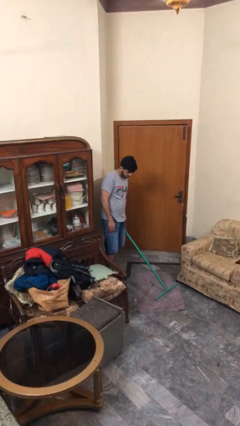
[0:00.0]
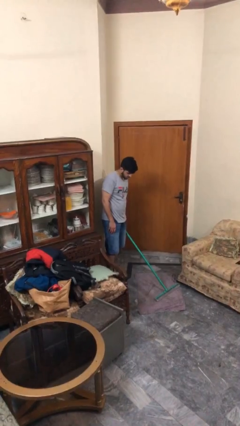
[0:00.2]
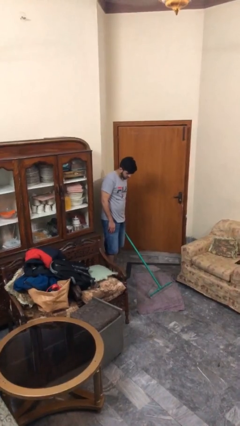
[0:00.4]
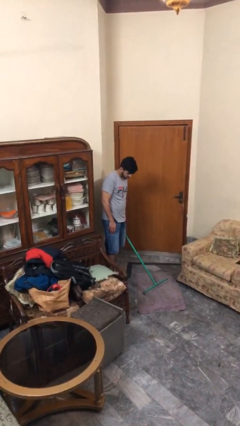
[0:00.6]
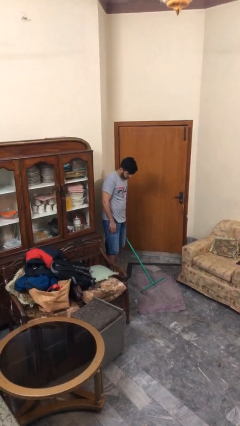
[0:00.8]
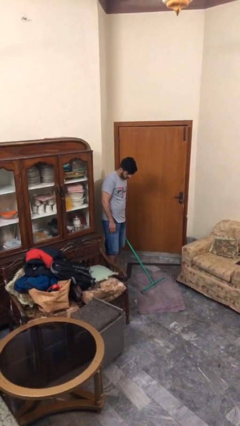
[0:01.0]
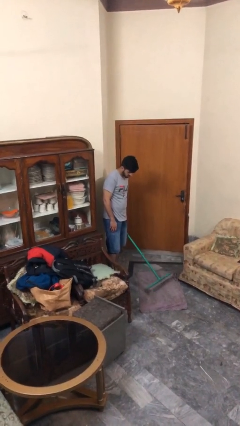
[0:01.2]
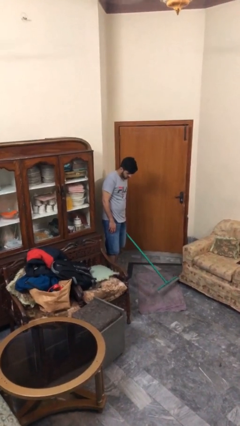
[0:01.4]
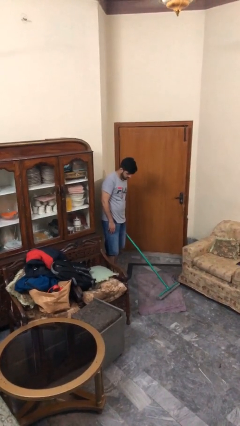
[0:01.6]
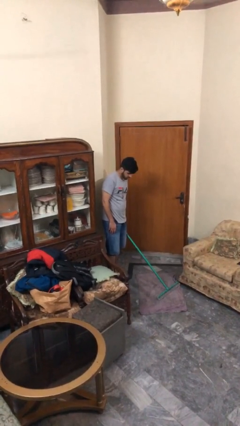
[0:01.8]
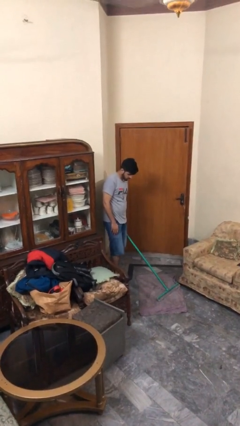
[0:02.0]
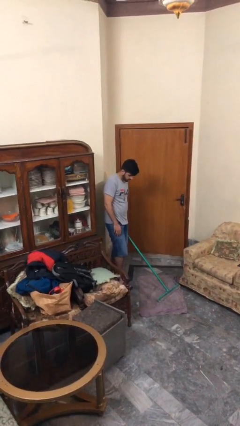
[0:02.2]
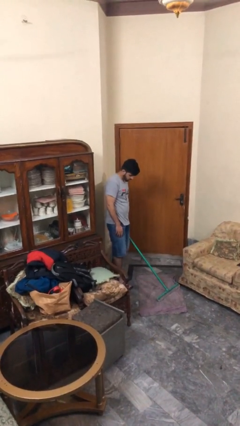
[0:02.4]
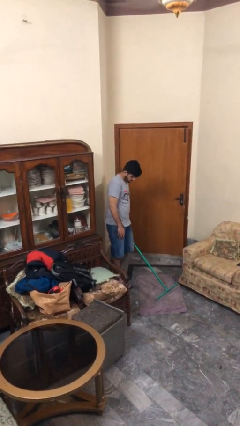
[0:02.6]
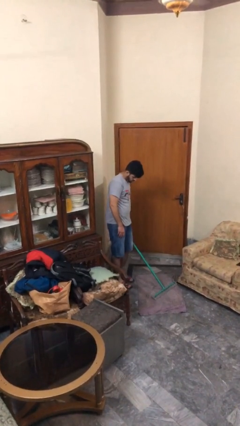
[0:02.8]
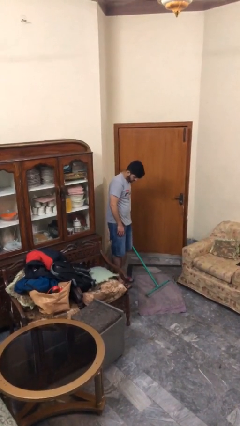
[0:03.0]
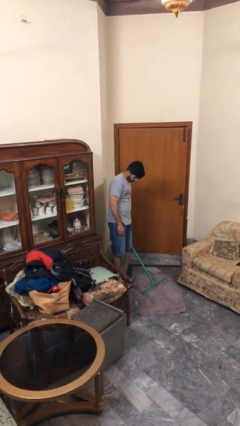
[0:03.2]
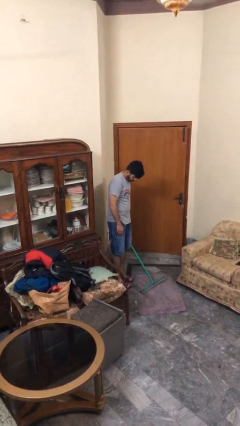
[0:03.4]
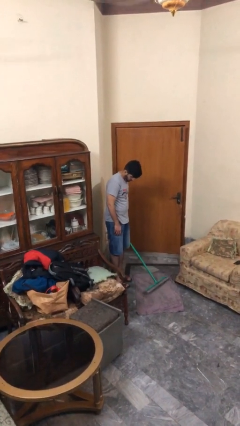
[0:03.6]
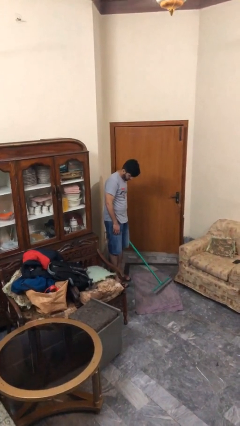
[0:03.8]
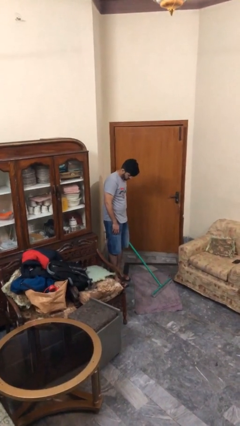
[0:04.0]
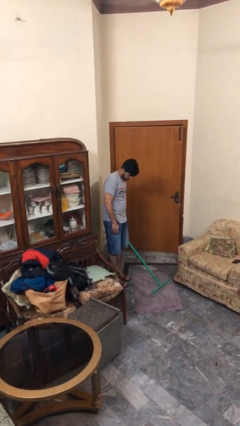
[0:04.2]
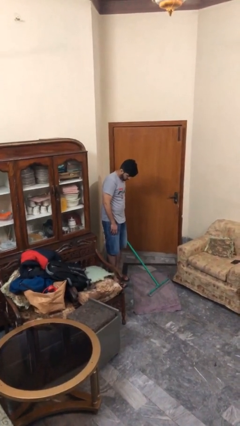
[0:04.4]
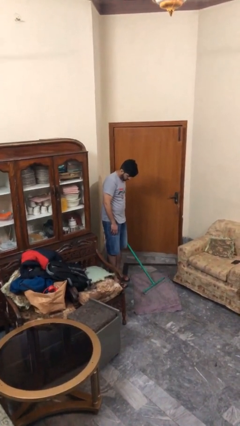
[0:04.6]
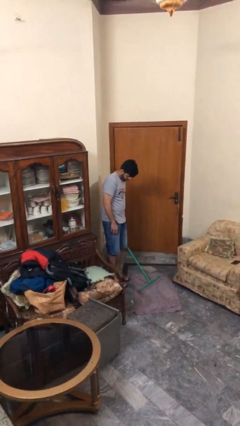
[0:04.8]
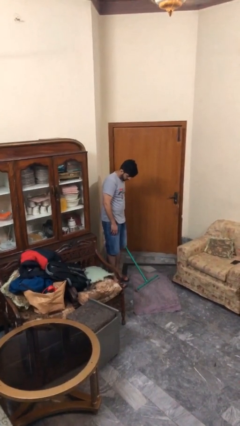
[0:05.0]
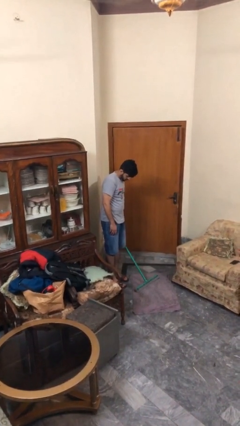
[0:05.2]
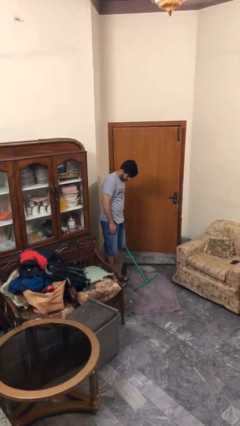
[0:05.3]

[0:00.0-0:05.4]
person vacuums carpet

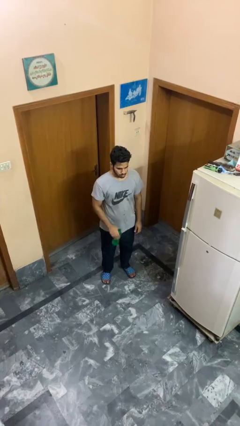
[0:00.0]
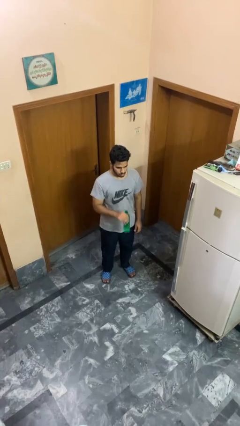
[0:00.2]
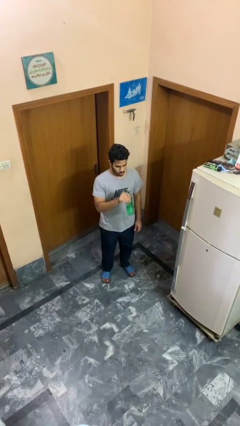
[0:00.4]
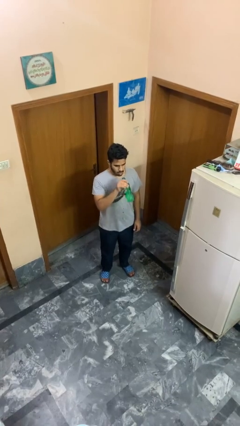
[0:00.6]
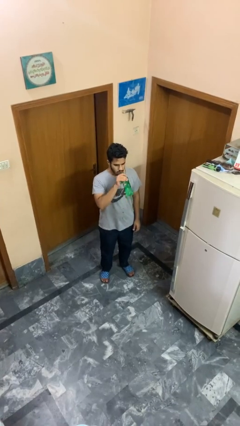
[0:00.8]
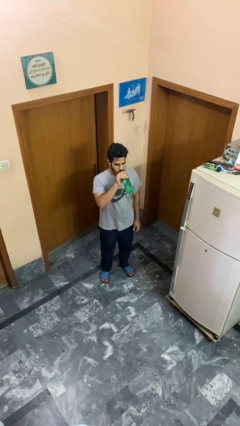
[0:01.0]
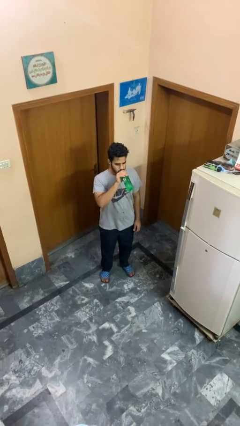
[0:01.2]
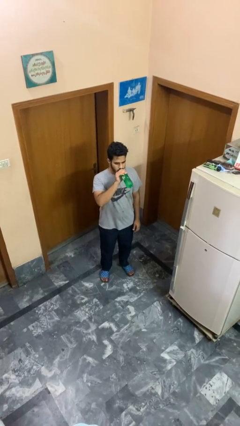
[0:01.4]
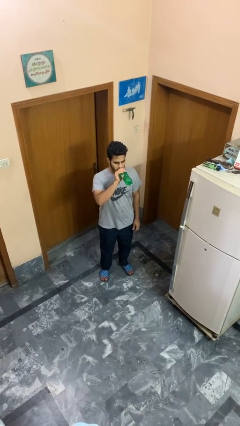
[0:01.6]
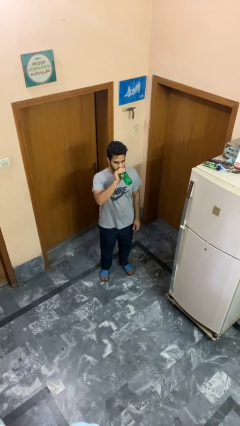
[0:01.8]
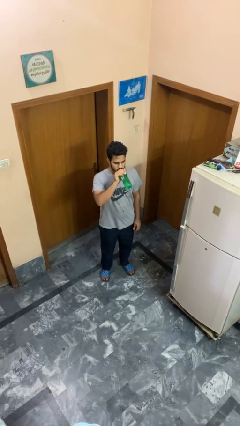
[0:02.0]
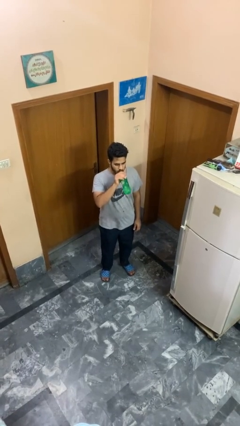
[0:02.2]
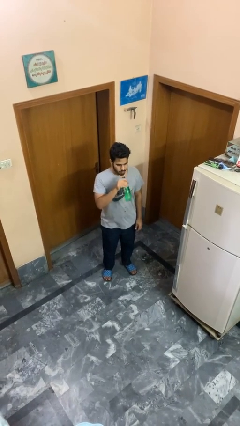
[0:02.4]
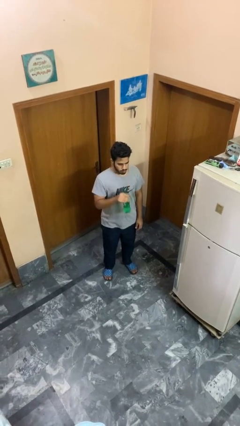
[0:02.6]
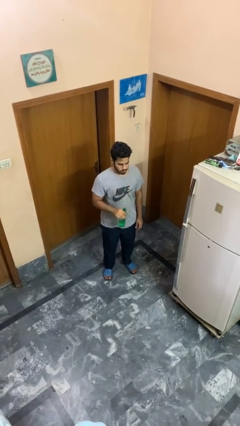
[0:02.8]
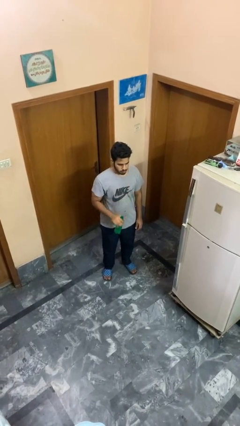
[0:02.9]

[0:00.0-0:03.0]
person drinks from bottle

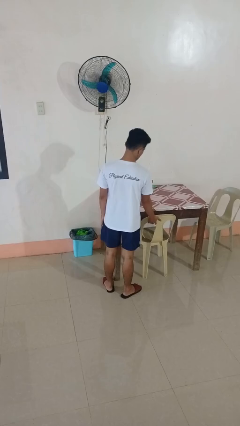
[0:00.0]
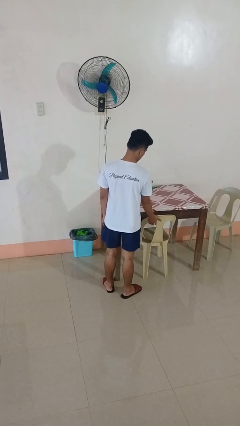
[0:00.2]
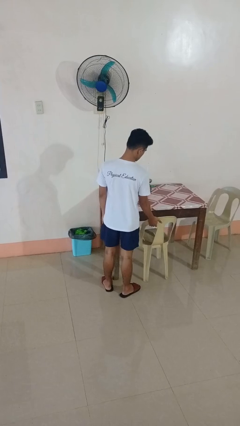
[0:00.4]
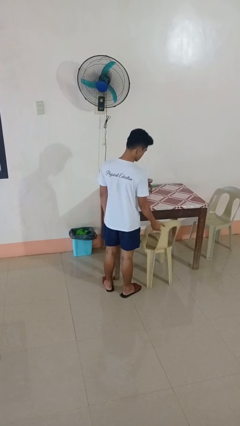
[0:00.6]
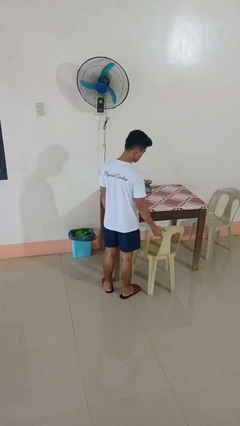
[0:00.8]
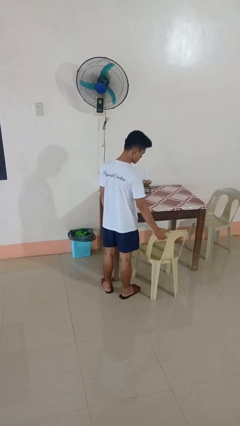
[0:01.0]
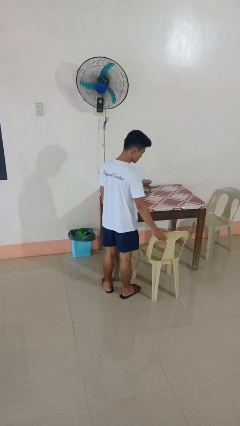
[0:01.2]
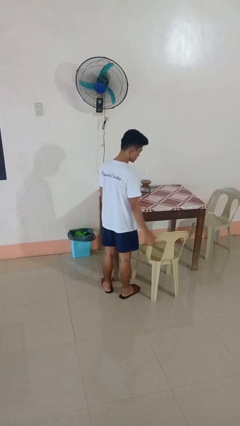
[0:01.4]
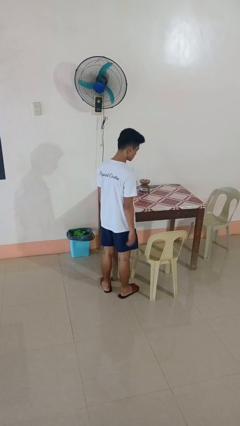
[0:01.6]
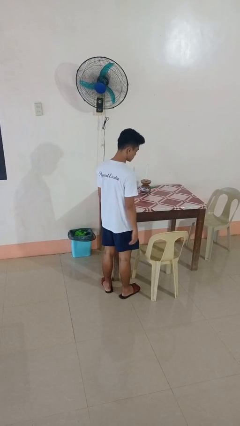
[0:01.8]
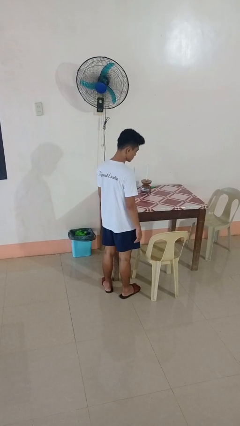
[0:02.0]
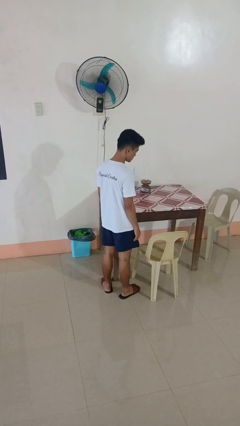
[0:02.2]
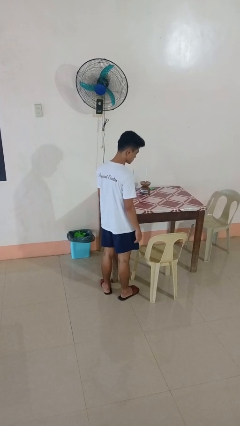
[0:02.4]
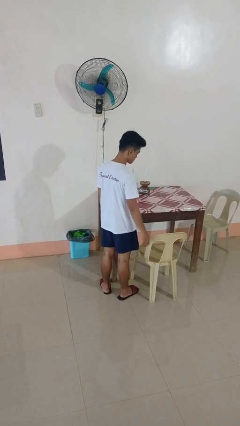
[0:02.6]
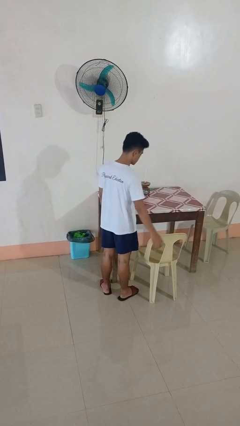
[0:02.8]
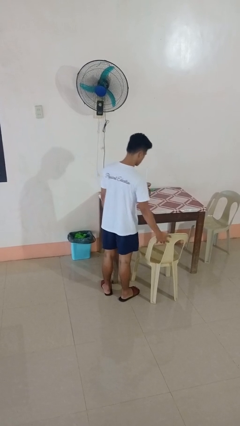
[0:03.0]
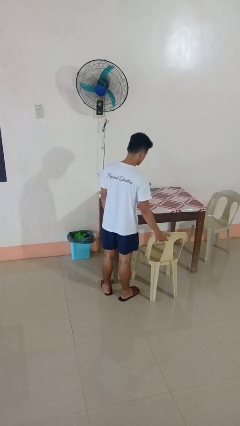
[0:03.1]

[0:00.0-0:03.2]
person pulls out chair

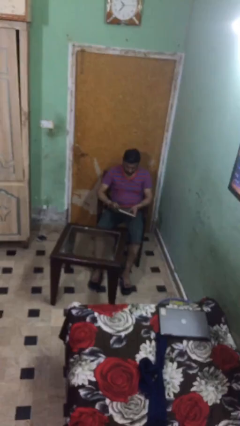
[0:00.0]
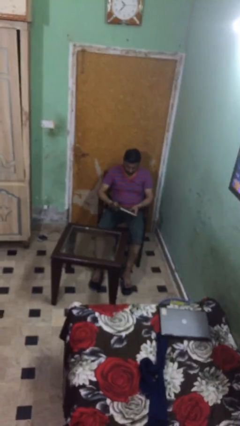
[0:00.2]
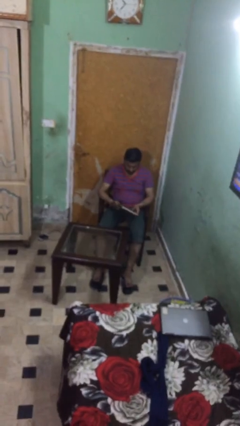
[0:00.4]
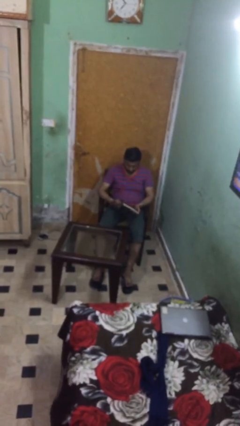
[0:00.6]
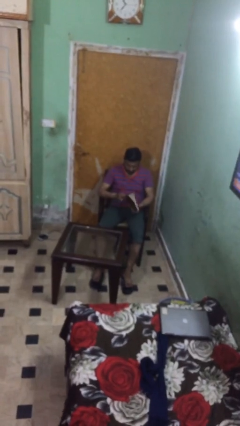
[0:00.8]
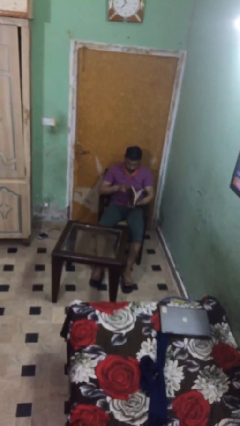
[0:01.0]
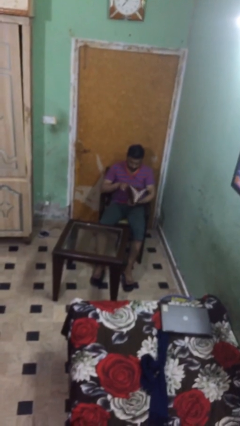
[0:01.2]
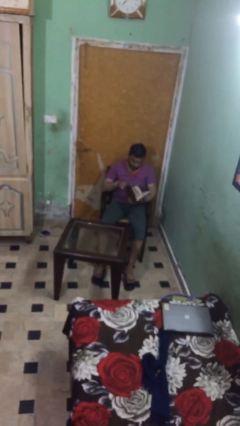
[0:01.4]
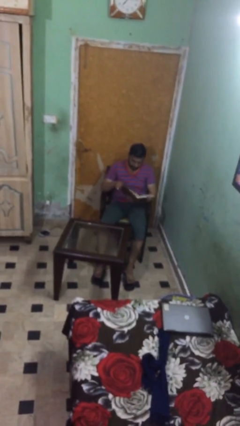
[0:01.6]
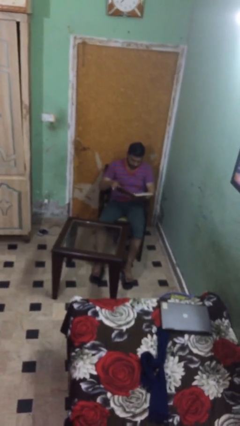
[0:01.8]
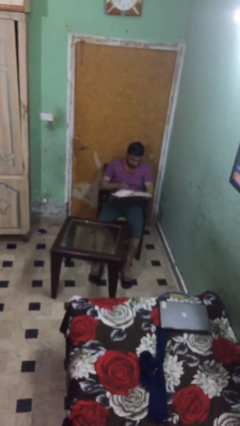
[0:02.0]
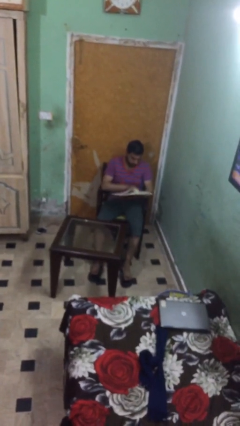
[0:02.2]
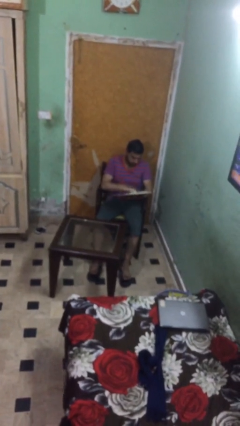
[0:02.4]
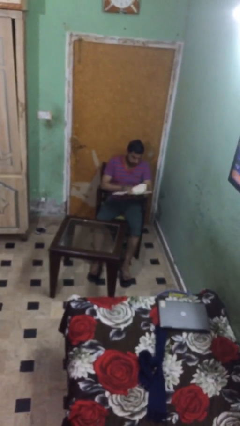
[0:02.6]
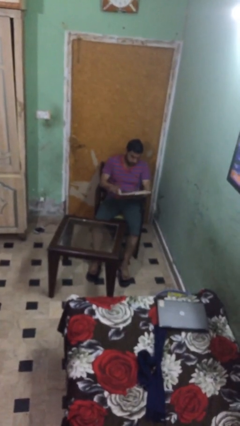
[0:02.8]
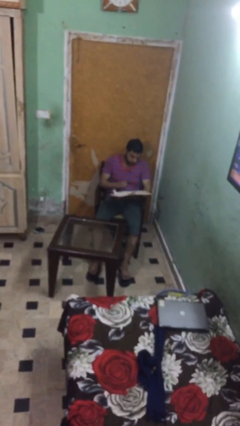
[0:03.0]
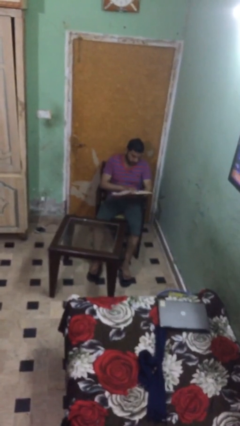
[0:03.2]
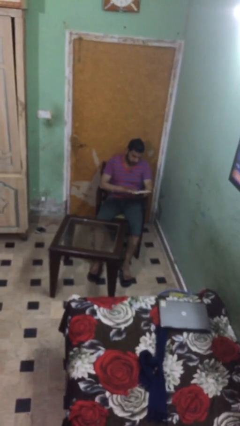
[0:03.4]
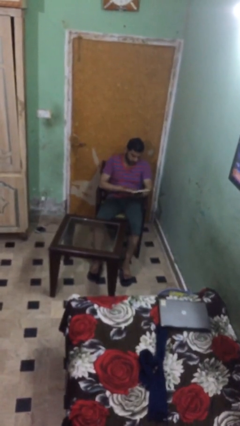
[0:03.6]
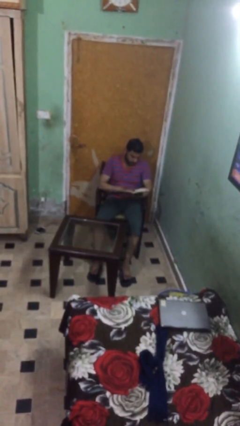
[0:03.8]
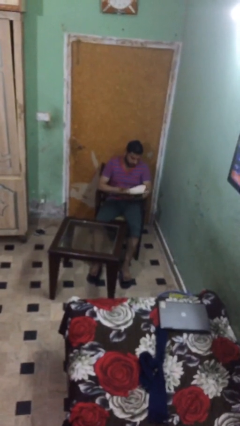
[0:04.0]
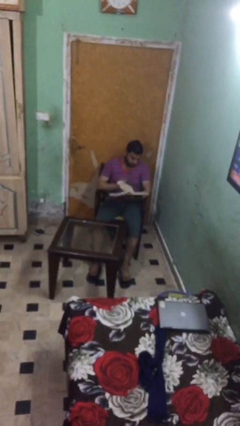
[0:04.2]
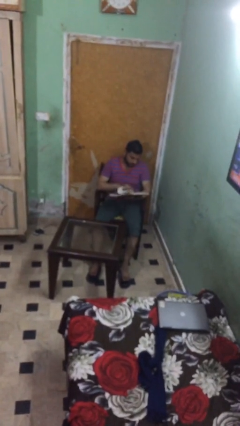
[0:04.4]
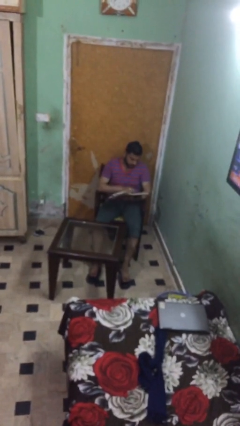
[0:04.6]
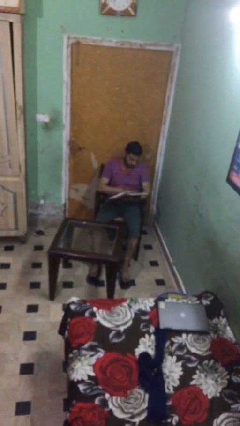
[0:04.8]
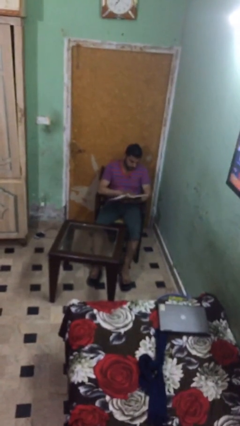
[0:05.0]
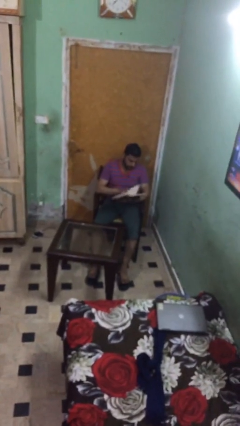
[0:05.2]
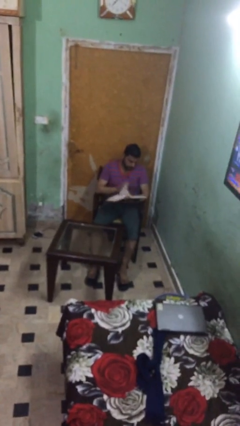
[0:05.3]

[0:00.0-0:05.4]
person reads document

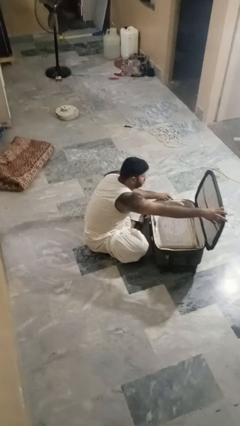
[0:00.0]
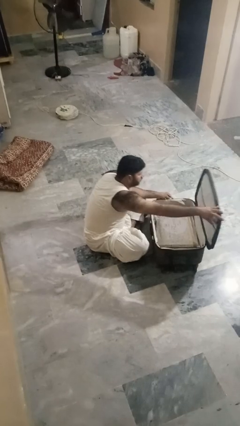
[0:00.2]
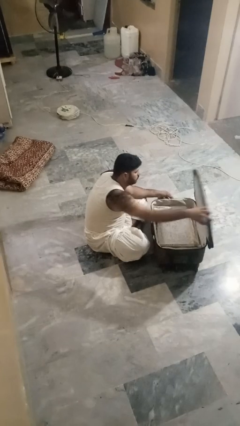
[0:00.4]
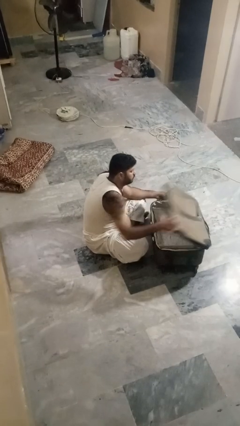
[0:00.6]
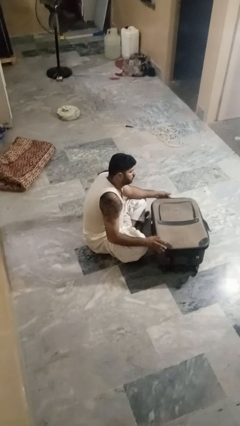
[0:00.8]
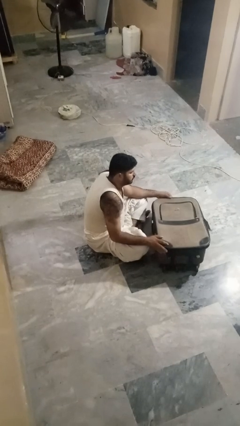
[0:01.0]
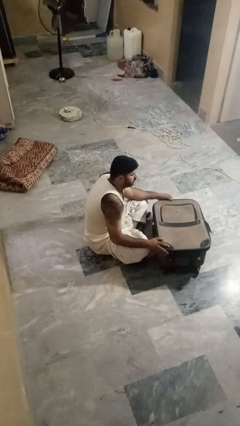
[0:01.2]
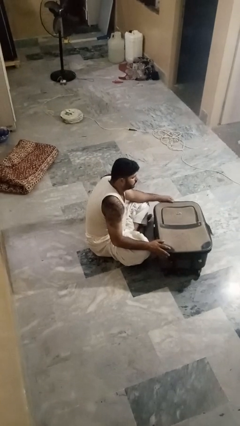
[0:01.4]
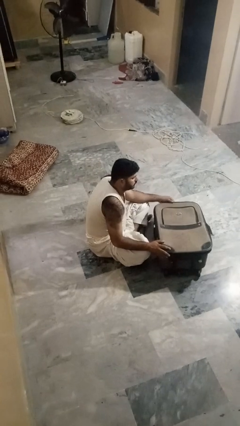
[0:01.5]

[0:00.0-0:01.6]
person closes suitcase
